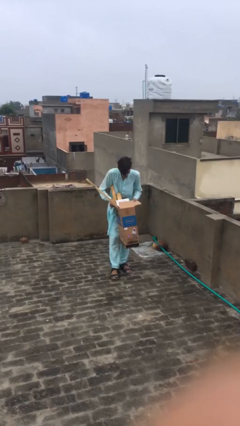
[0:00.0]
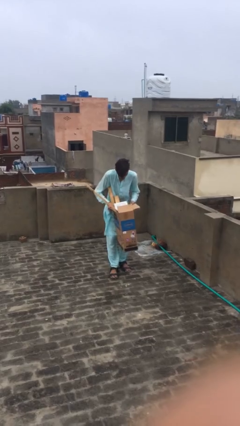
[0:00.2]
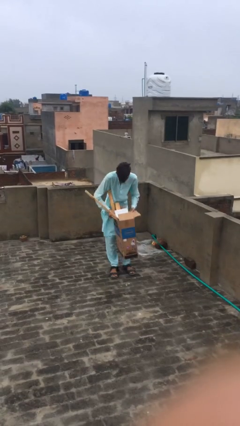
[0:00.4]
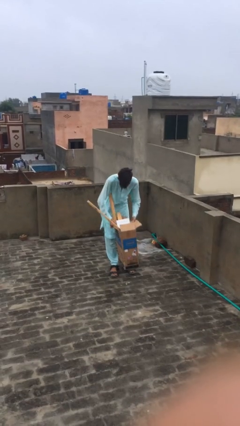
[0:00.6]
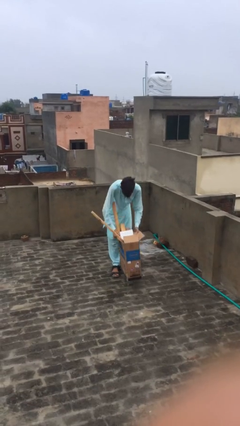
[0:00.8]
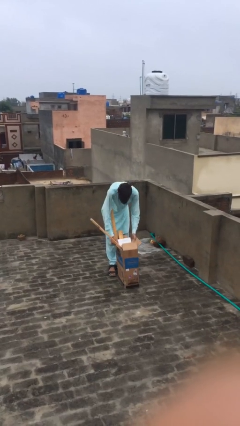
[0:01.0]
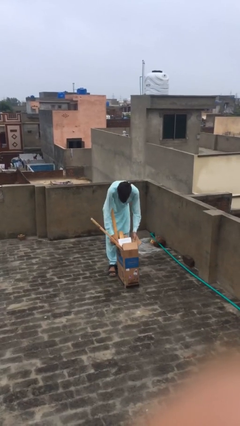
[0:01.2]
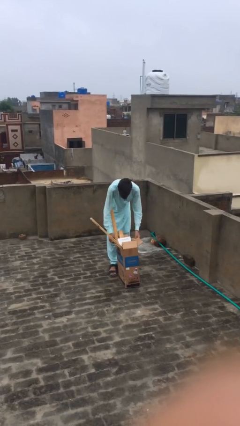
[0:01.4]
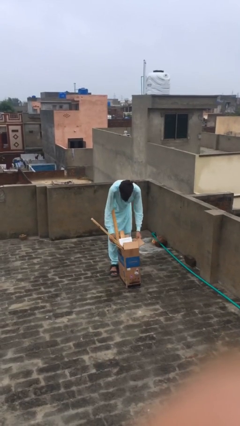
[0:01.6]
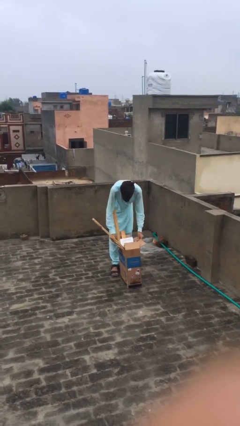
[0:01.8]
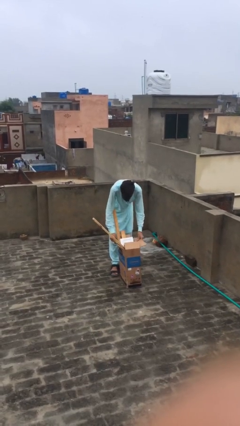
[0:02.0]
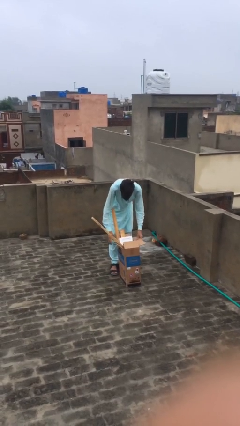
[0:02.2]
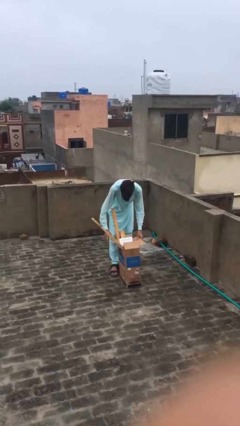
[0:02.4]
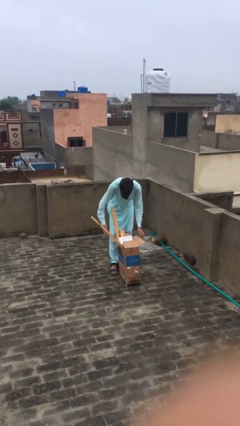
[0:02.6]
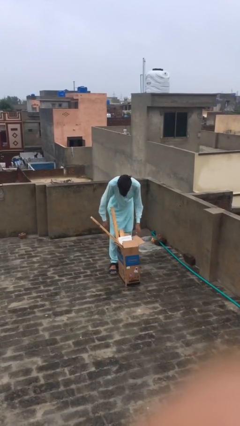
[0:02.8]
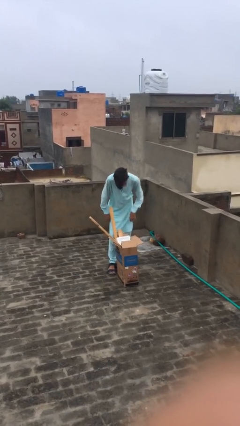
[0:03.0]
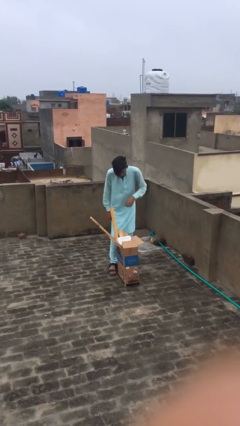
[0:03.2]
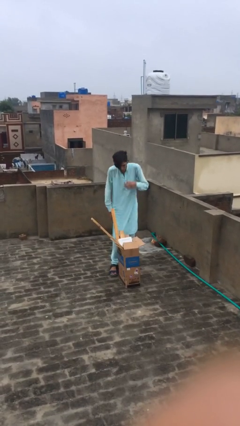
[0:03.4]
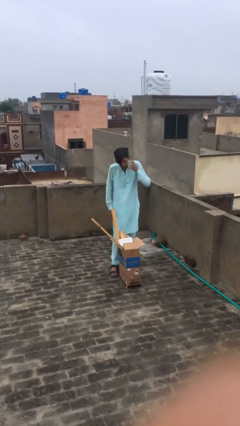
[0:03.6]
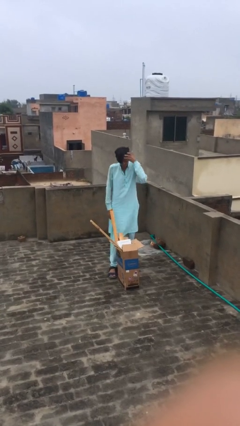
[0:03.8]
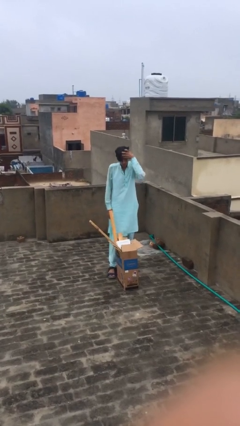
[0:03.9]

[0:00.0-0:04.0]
person puts down object on floor

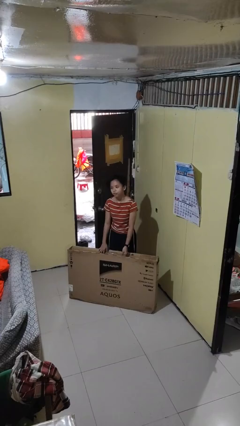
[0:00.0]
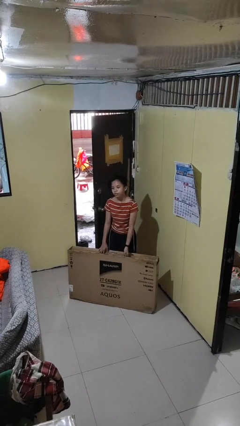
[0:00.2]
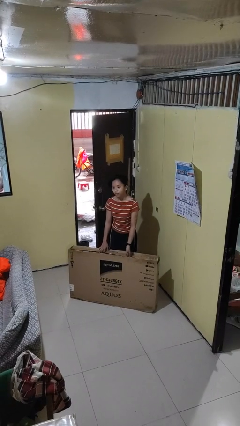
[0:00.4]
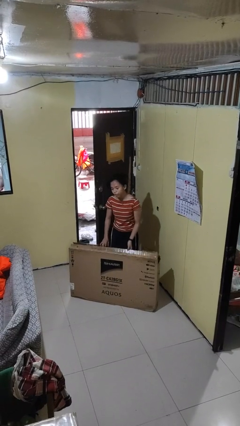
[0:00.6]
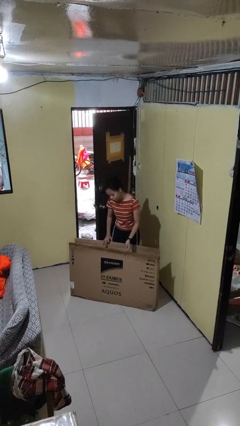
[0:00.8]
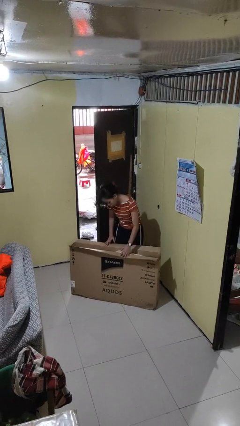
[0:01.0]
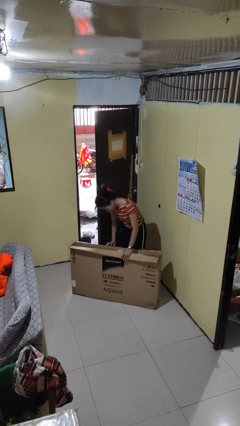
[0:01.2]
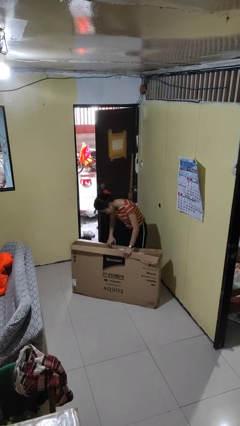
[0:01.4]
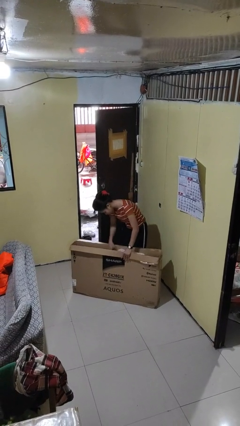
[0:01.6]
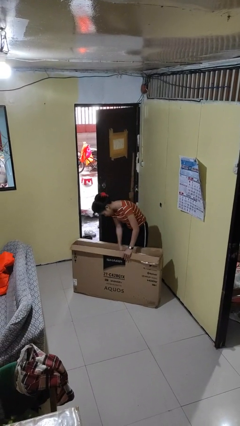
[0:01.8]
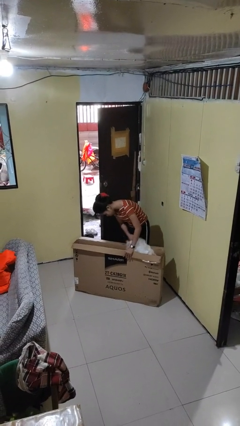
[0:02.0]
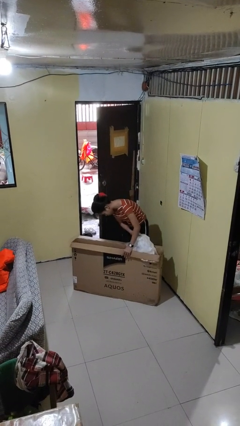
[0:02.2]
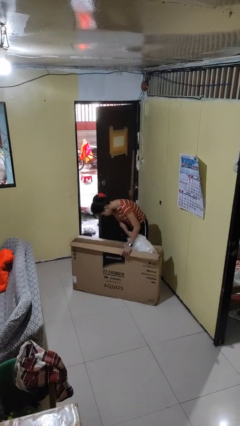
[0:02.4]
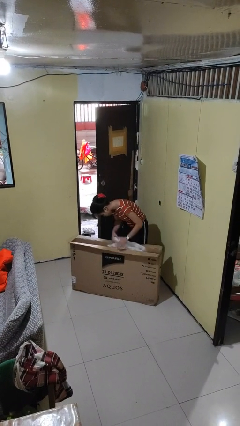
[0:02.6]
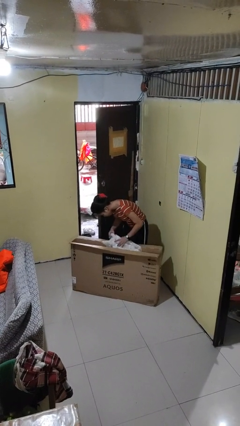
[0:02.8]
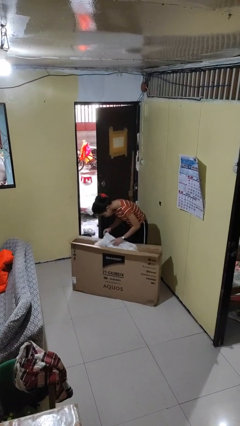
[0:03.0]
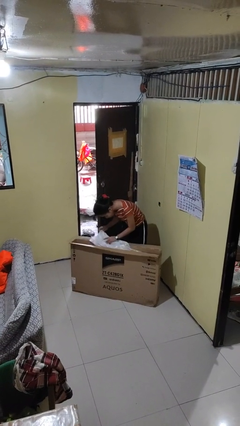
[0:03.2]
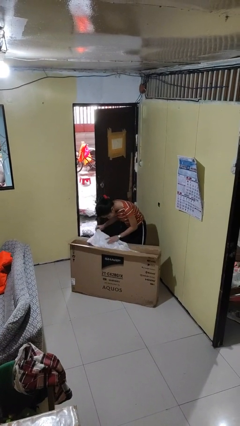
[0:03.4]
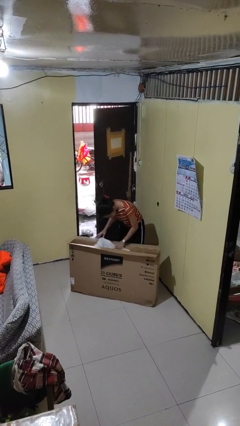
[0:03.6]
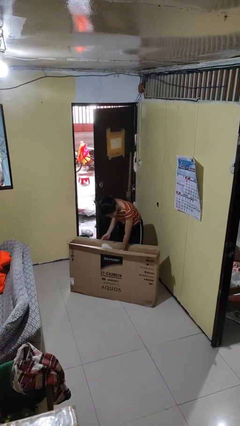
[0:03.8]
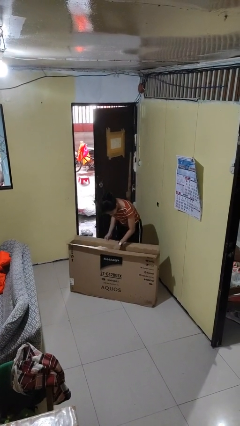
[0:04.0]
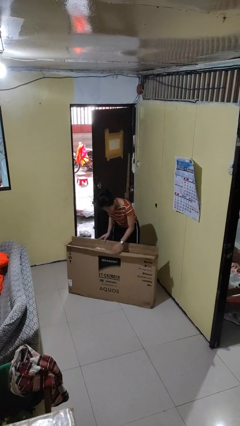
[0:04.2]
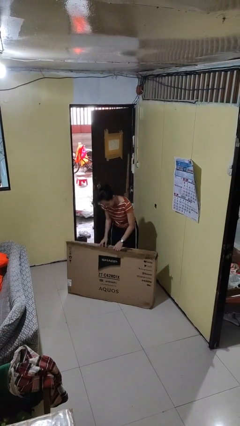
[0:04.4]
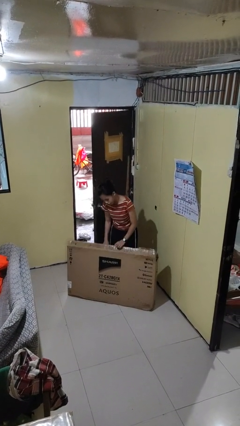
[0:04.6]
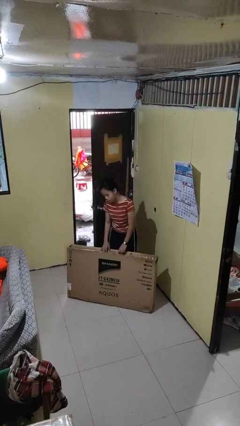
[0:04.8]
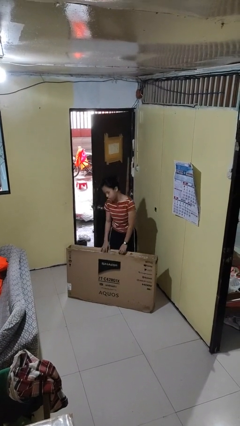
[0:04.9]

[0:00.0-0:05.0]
person searches in box

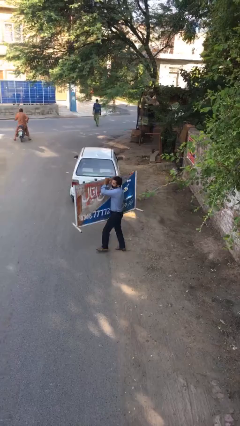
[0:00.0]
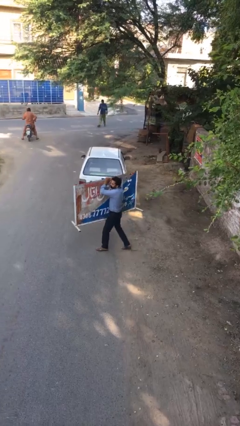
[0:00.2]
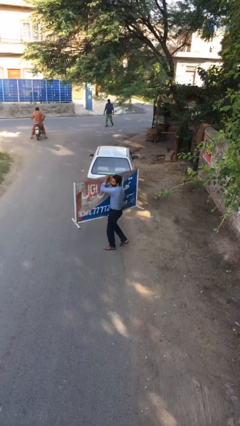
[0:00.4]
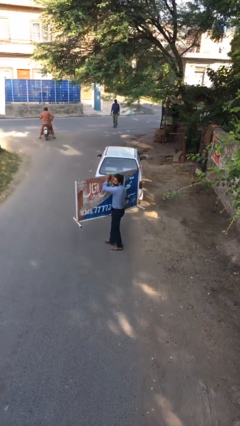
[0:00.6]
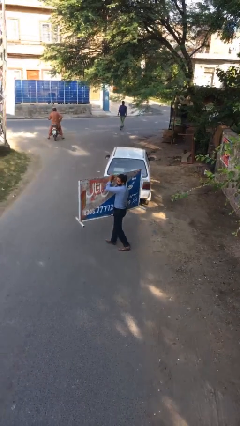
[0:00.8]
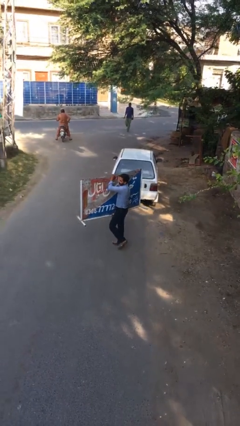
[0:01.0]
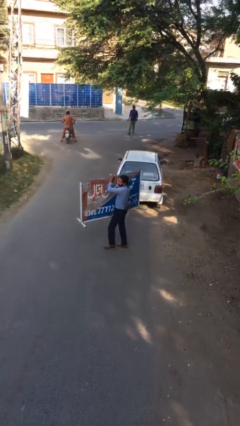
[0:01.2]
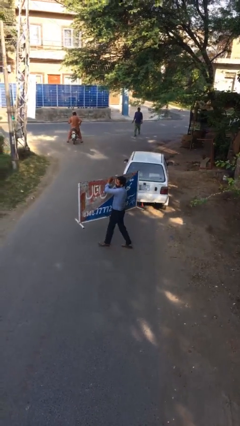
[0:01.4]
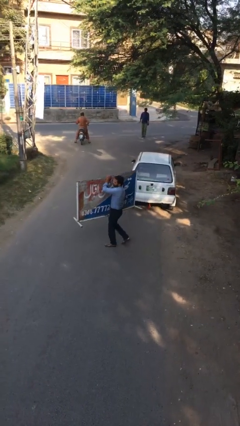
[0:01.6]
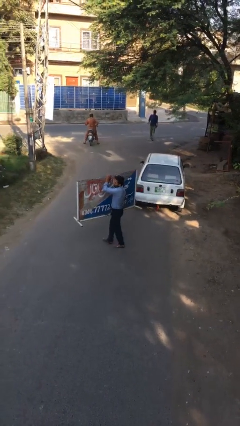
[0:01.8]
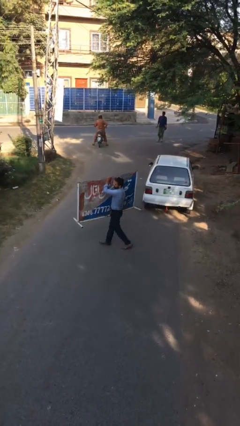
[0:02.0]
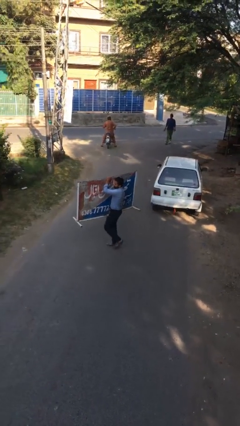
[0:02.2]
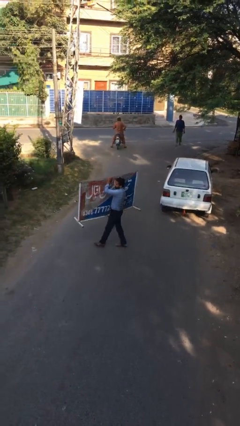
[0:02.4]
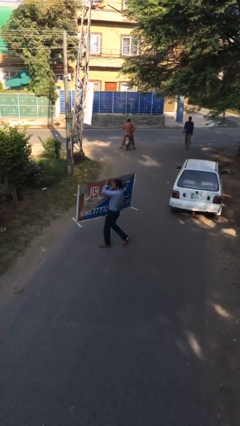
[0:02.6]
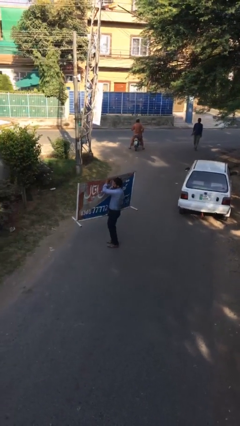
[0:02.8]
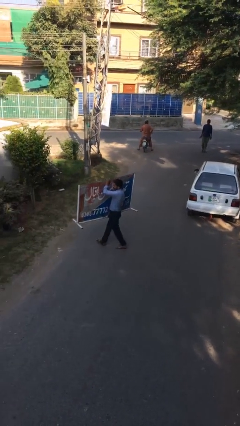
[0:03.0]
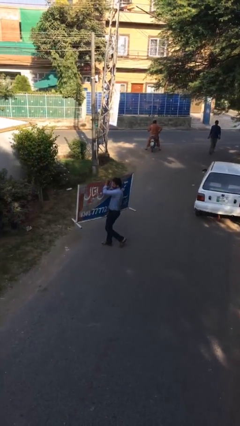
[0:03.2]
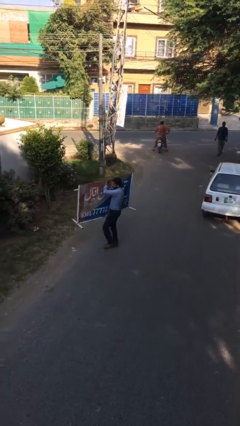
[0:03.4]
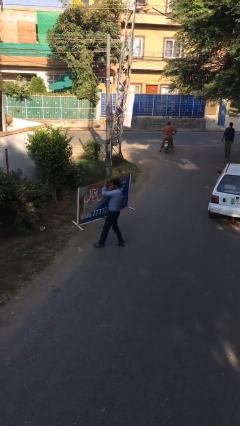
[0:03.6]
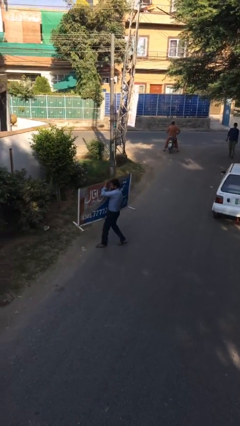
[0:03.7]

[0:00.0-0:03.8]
person carries heavy object

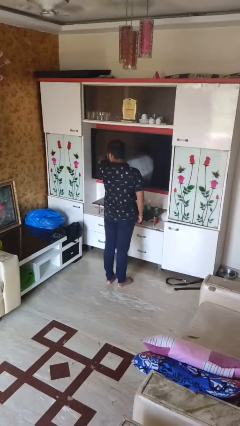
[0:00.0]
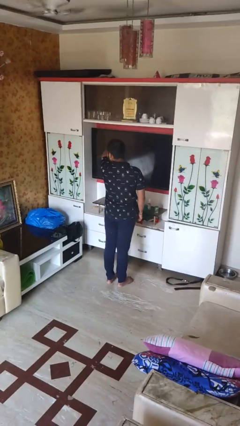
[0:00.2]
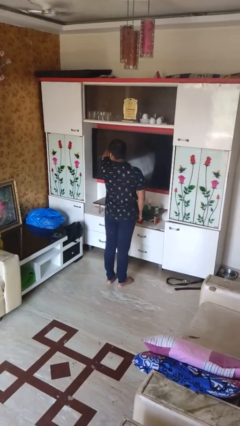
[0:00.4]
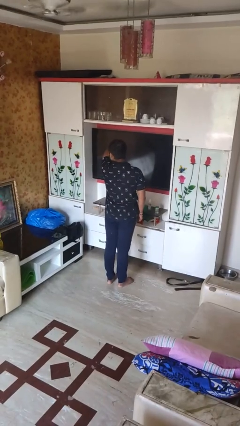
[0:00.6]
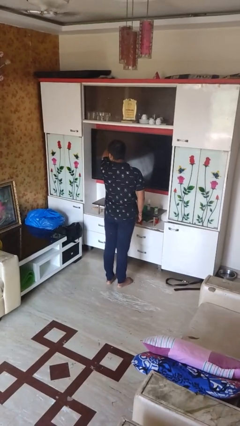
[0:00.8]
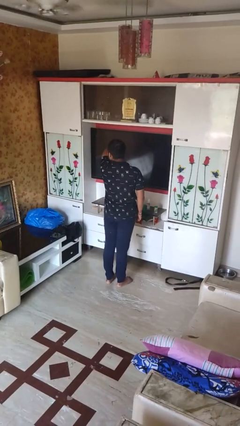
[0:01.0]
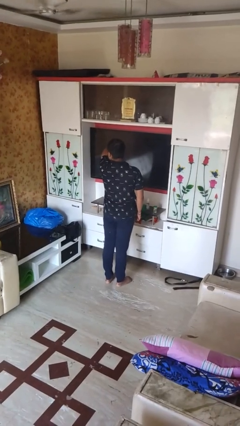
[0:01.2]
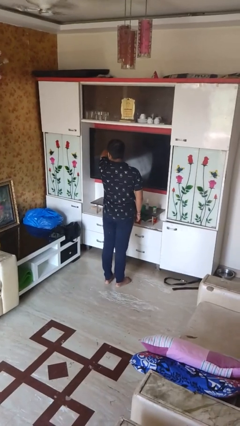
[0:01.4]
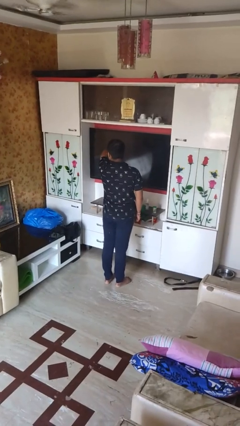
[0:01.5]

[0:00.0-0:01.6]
person sneezes into arm

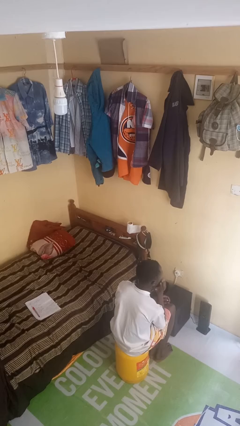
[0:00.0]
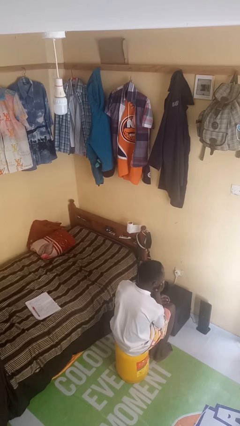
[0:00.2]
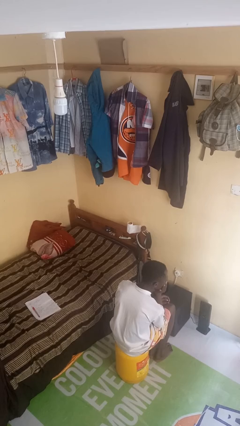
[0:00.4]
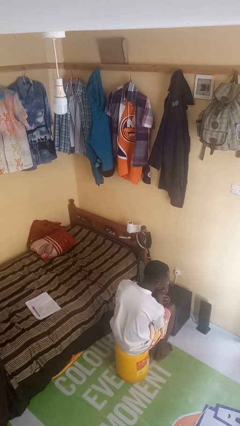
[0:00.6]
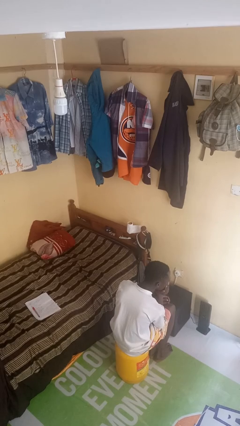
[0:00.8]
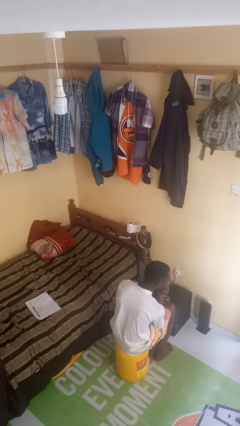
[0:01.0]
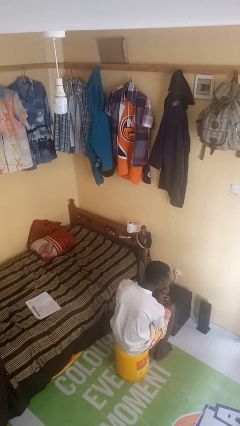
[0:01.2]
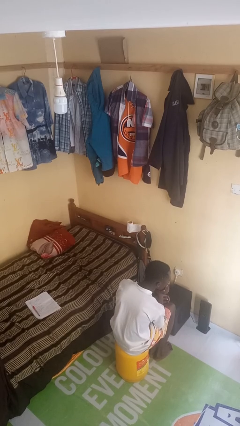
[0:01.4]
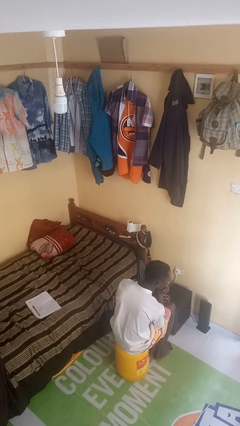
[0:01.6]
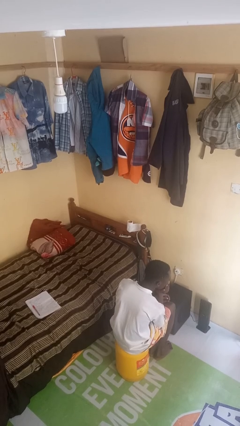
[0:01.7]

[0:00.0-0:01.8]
person strokes chin

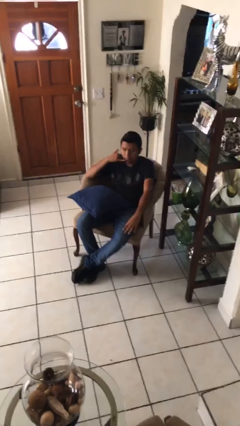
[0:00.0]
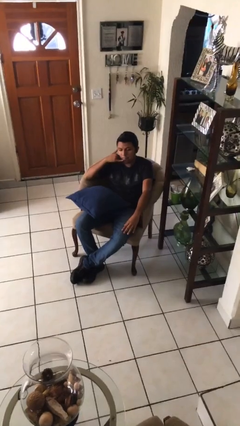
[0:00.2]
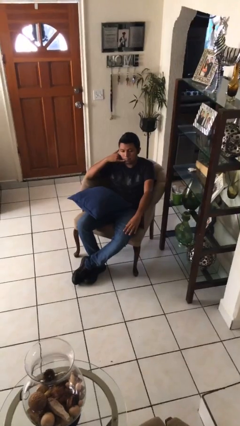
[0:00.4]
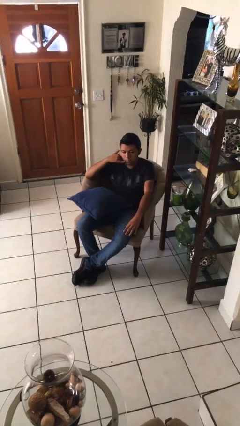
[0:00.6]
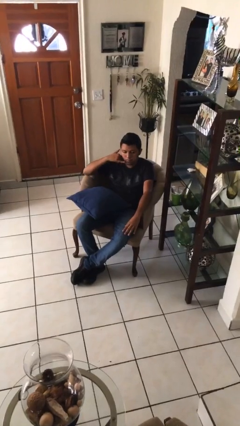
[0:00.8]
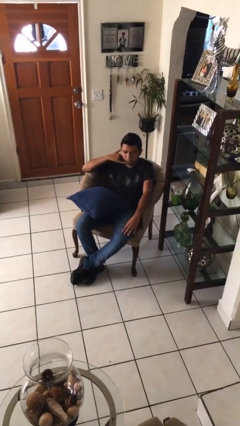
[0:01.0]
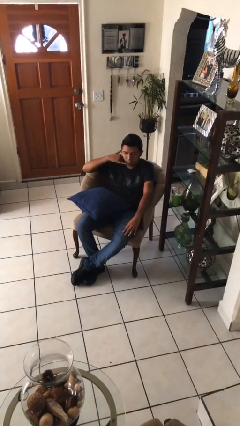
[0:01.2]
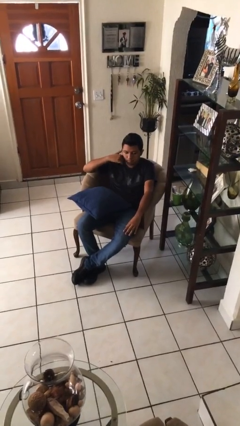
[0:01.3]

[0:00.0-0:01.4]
person gestures call me
